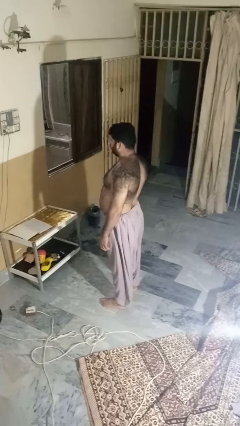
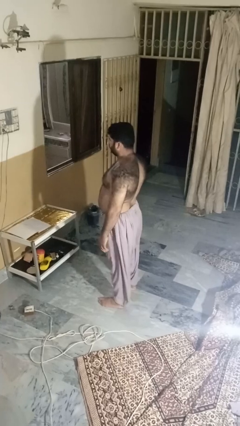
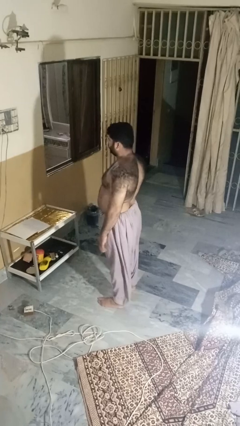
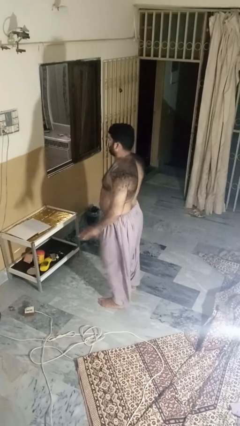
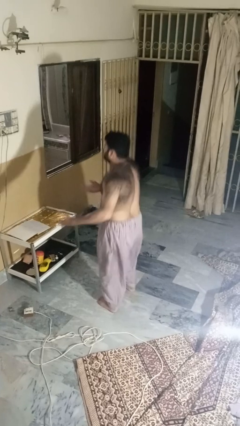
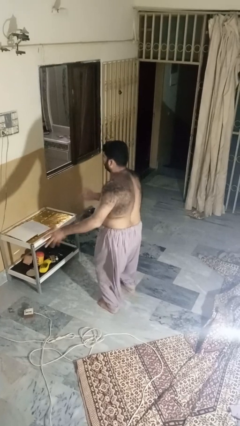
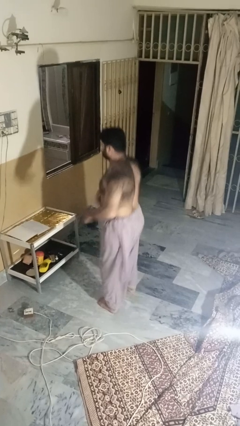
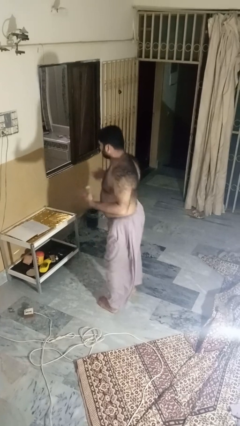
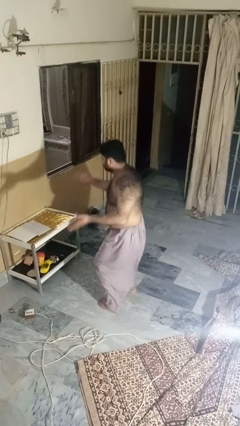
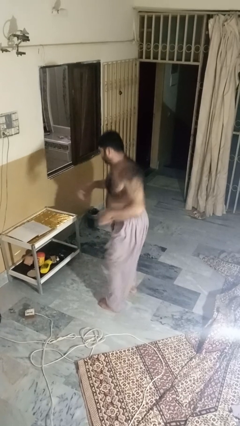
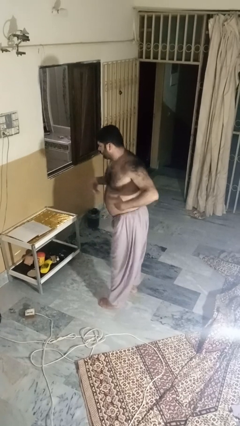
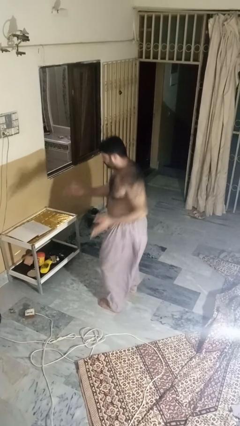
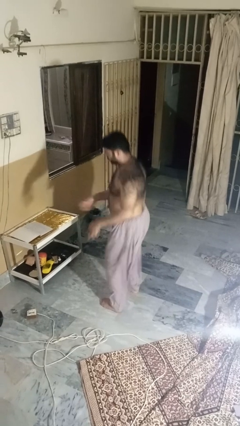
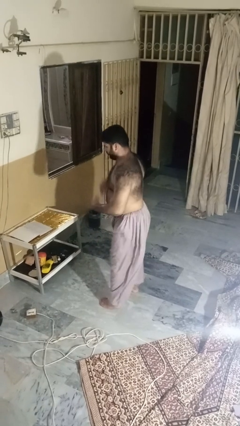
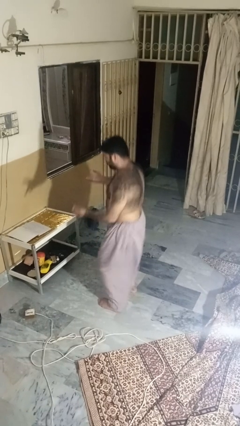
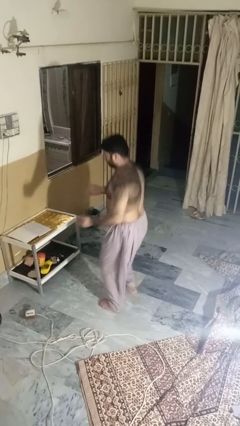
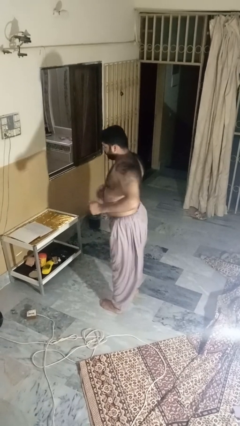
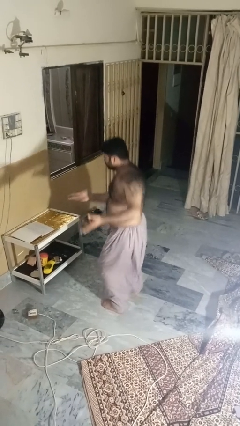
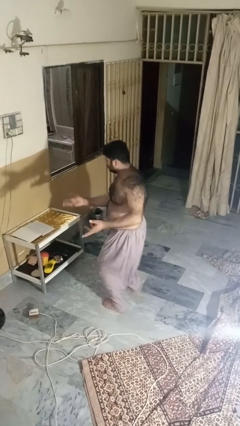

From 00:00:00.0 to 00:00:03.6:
person dances in place

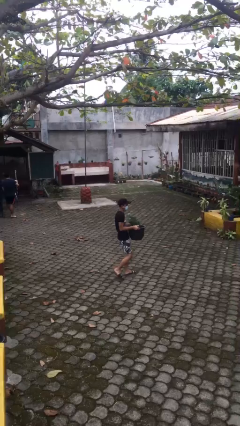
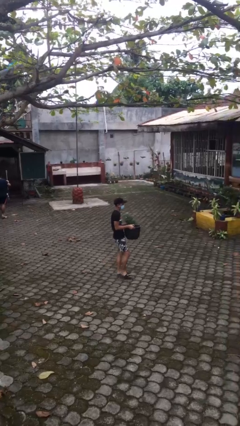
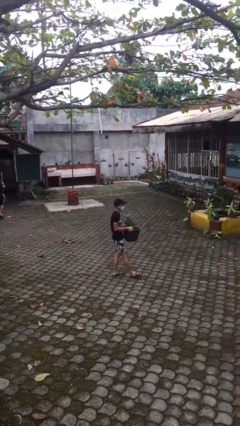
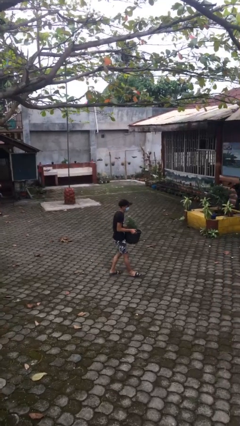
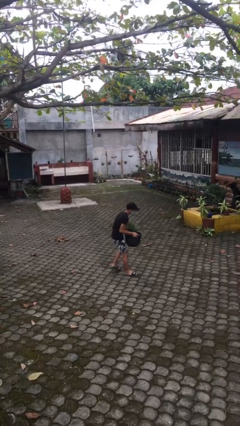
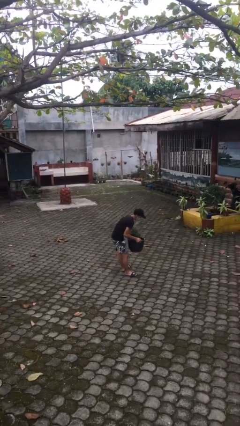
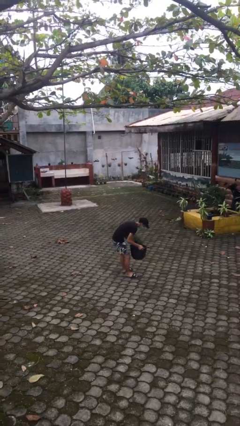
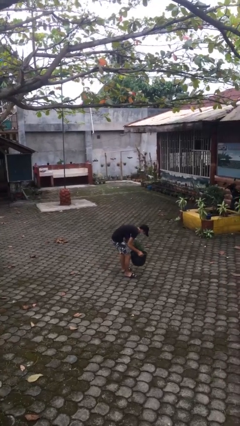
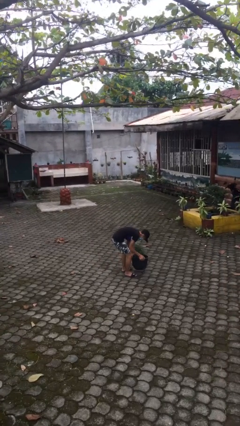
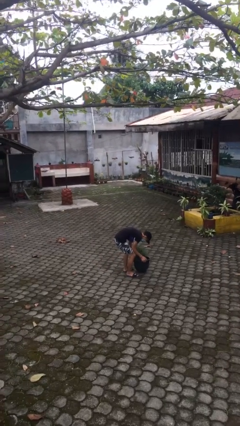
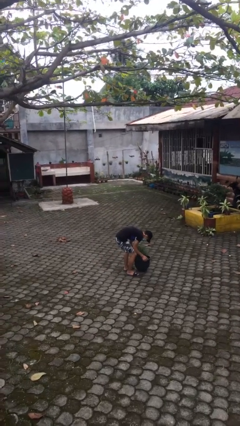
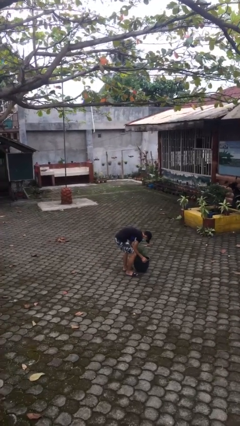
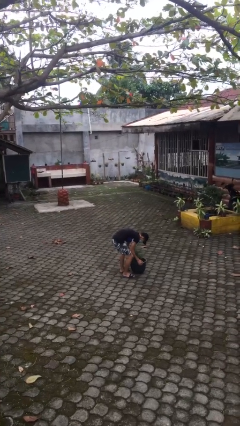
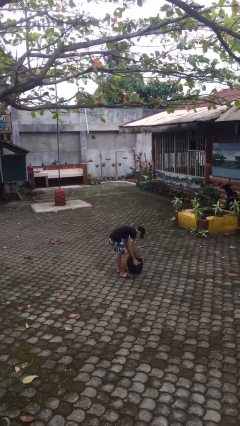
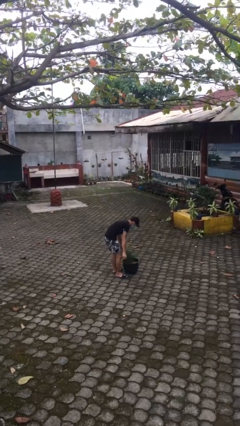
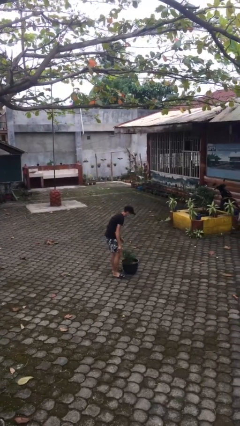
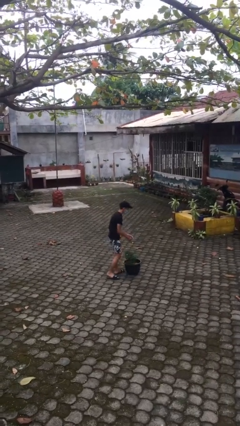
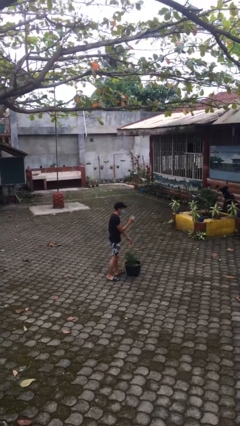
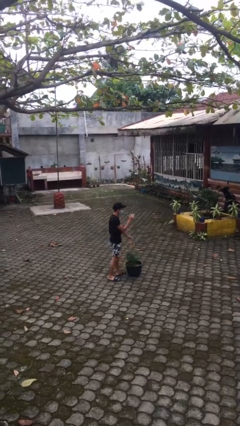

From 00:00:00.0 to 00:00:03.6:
person puts down object on floor

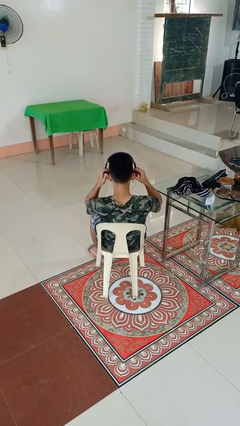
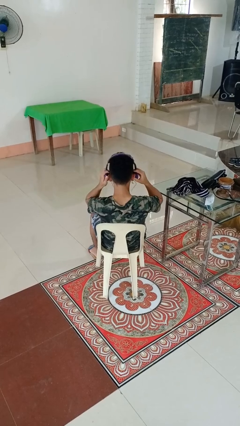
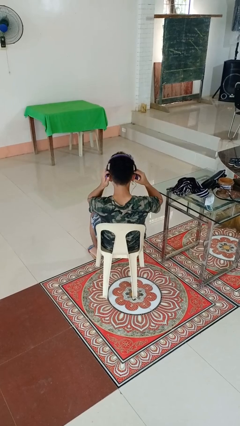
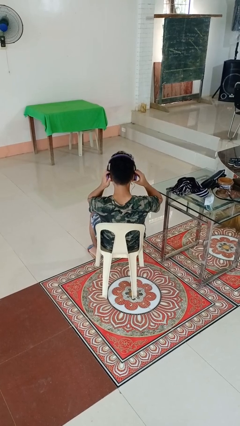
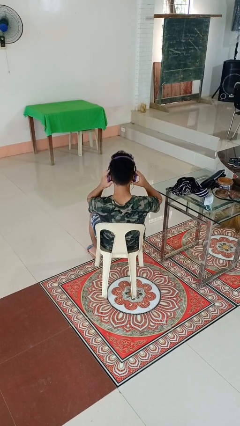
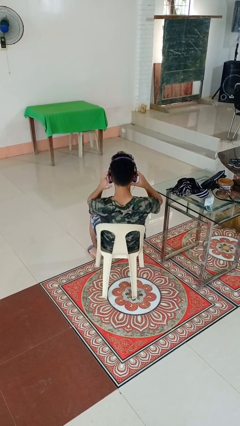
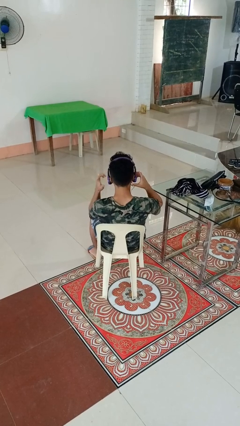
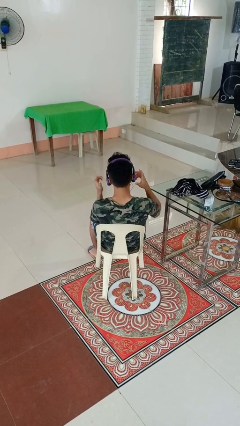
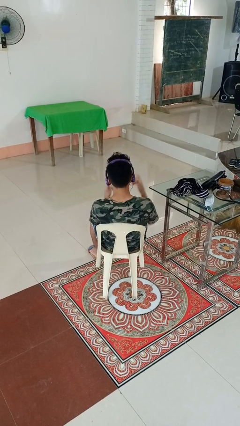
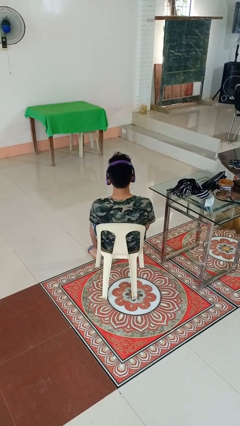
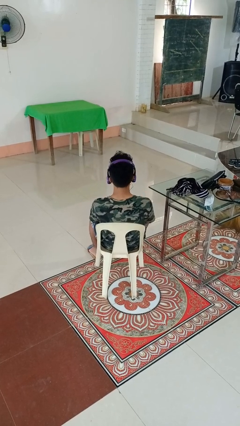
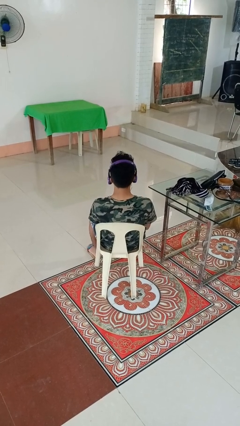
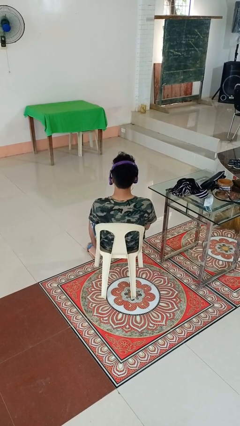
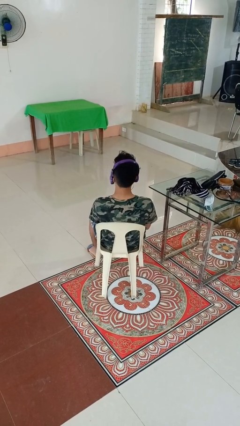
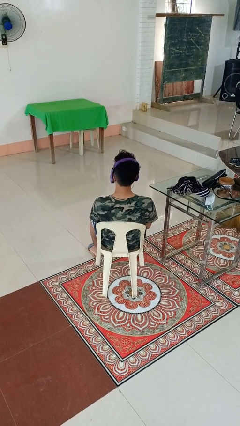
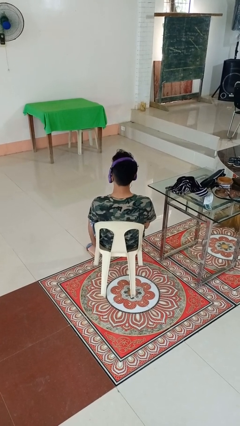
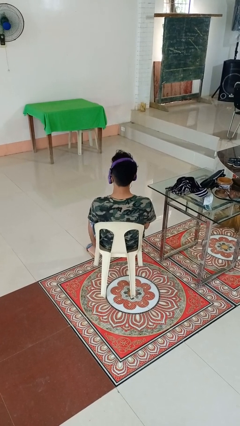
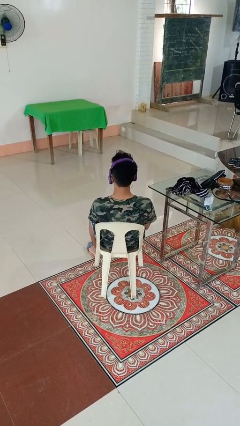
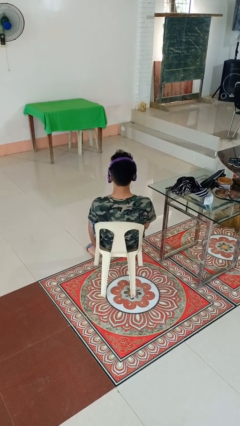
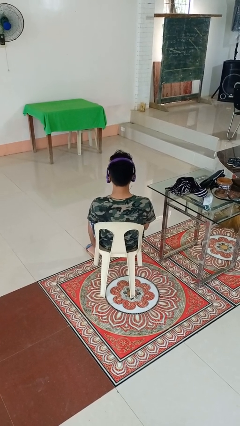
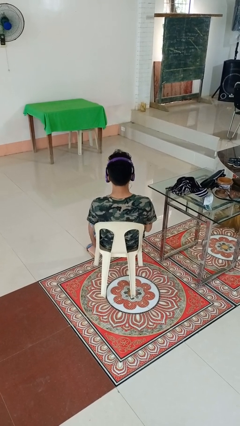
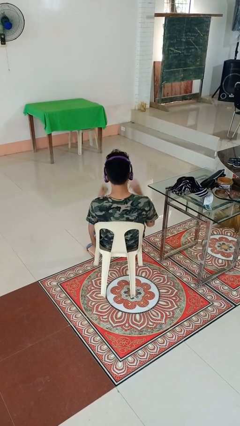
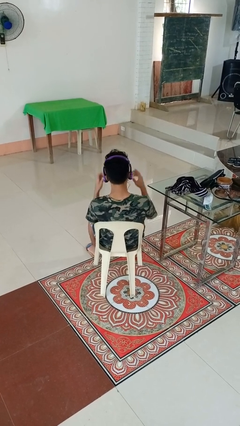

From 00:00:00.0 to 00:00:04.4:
person puts on headphones

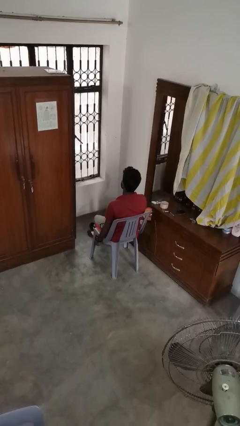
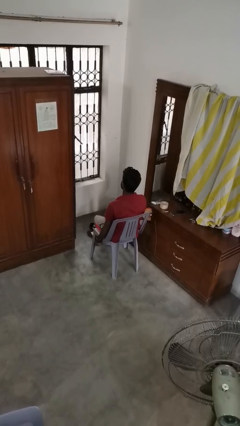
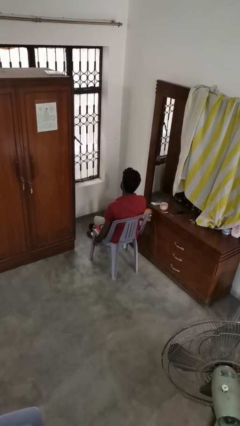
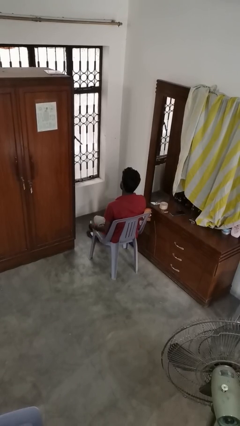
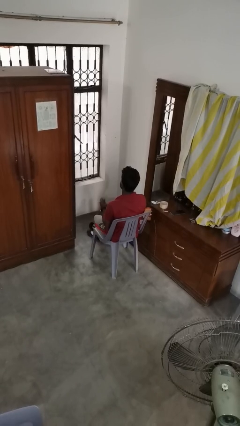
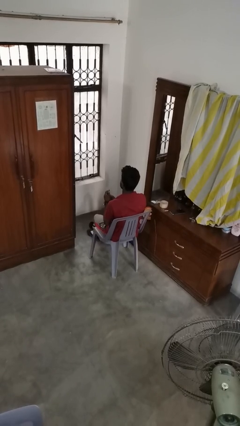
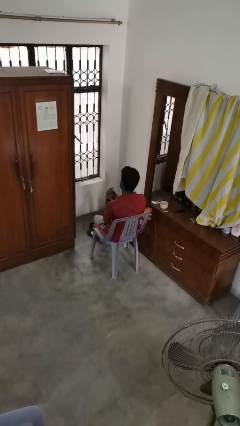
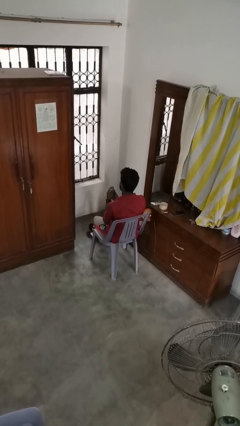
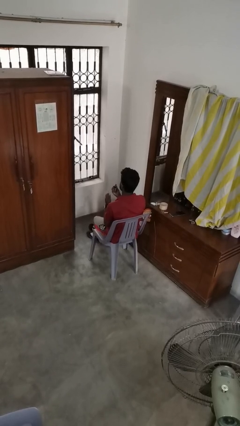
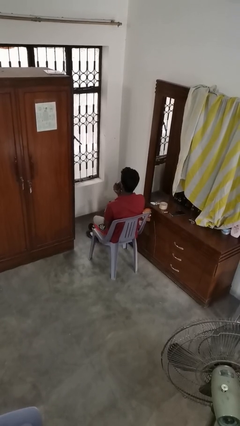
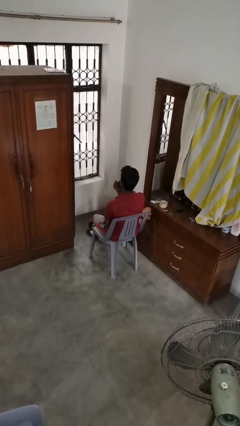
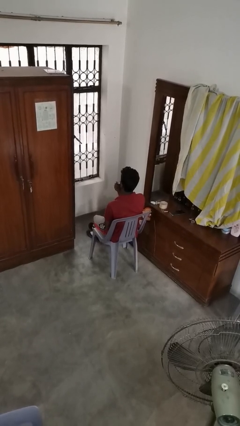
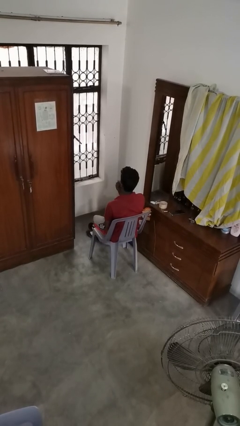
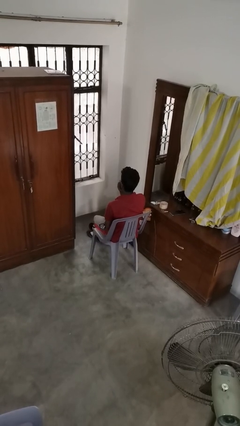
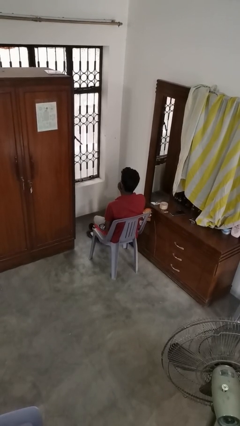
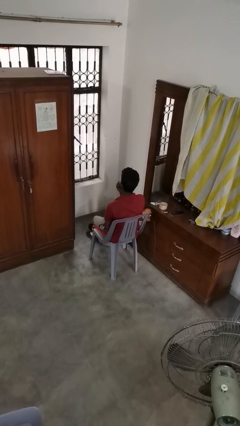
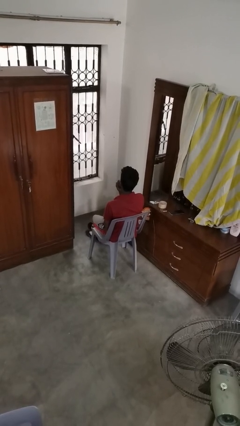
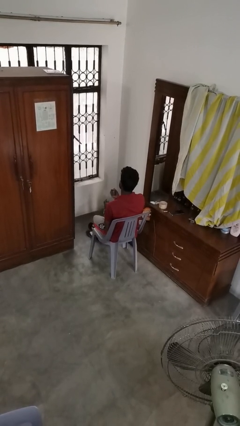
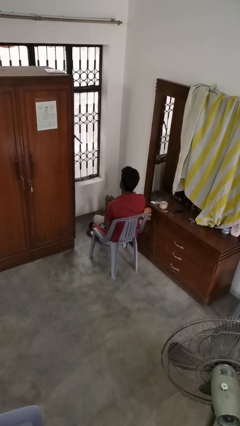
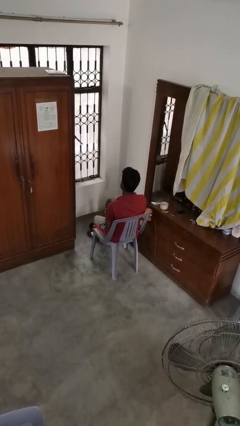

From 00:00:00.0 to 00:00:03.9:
person applies lip makeup

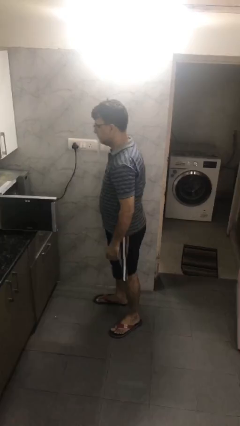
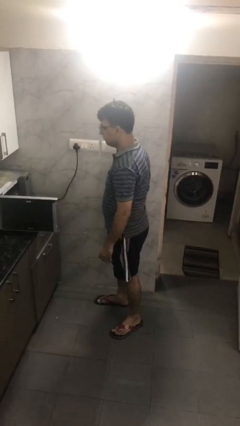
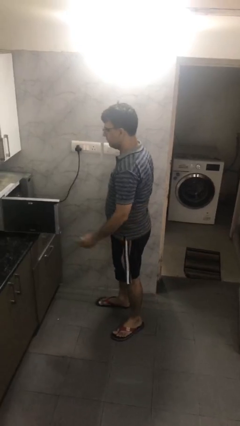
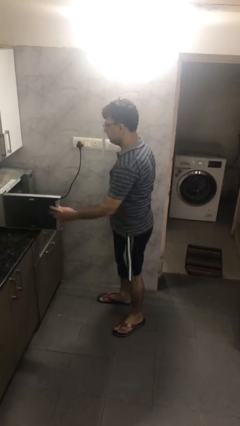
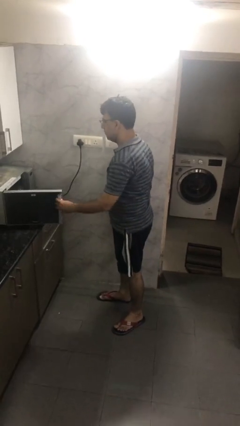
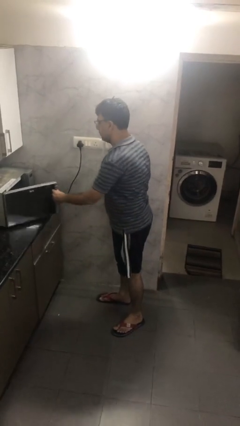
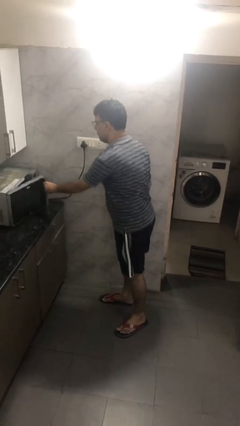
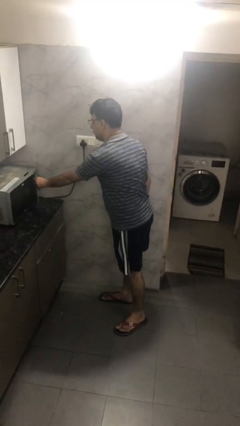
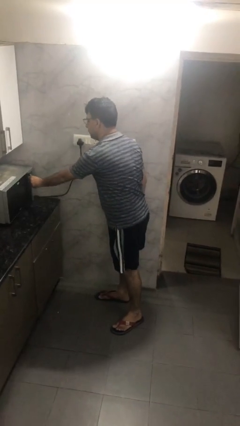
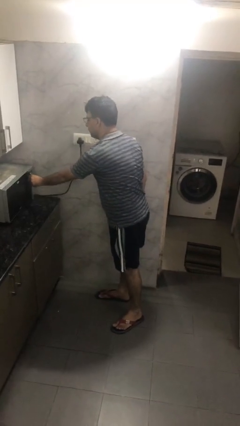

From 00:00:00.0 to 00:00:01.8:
person closes microwave

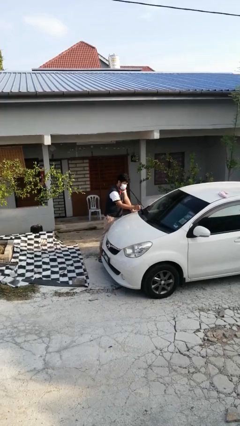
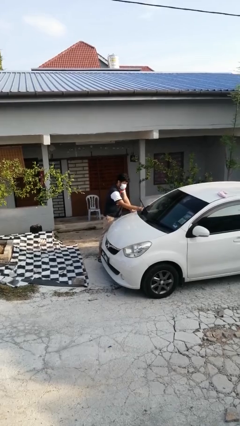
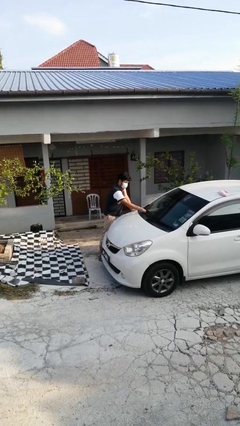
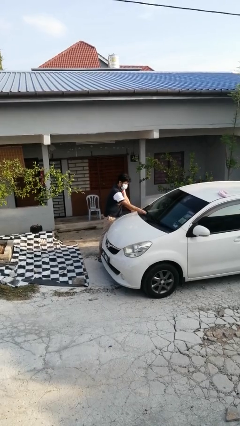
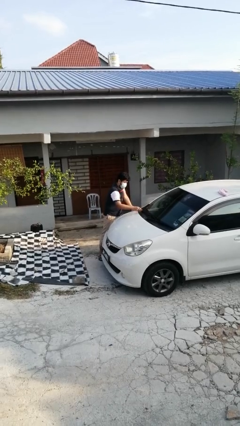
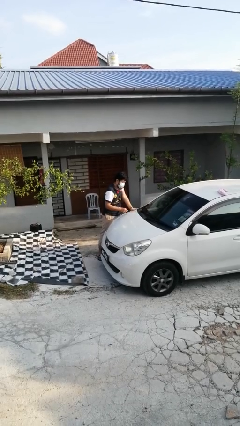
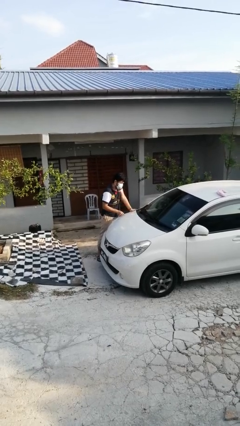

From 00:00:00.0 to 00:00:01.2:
person flips down car wipers
